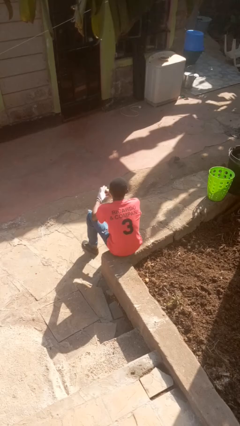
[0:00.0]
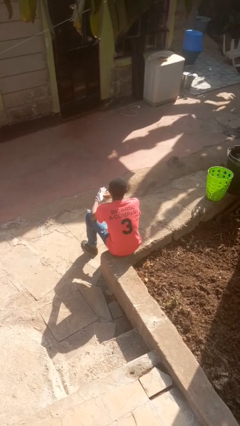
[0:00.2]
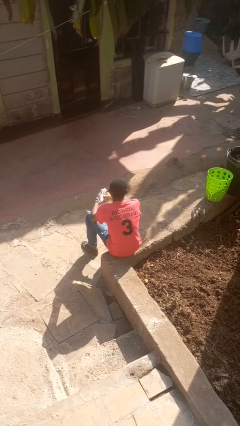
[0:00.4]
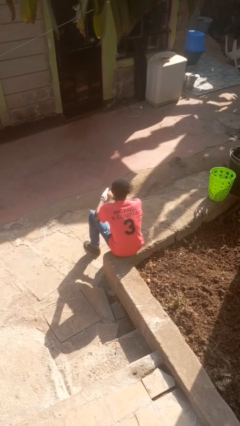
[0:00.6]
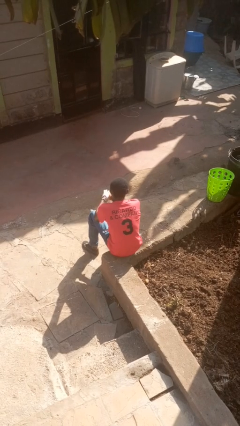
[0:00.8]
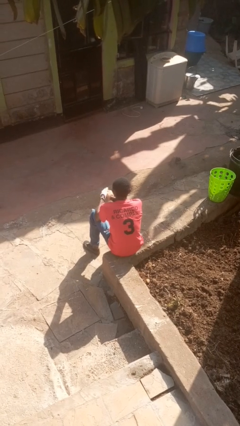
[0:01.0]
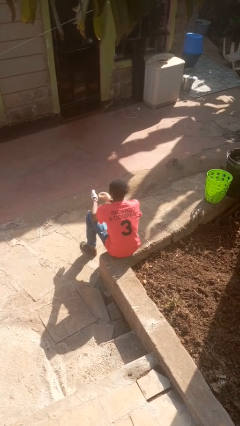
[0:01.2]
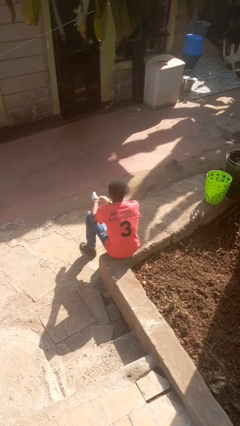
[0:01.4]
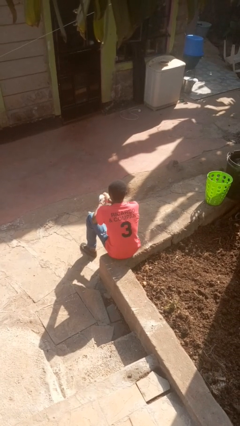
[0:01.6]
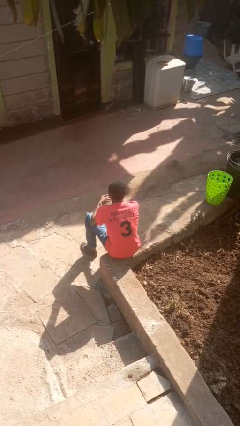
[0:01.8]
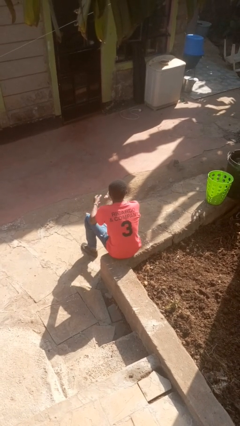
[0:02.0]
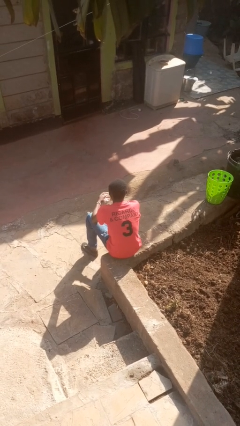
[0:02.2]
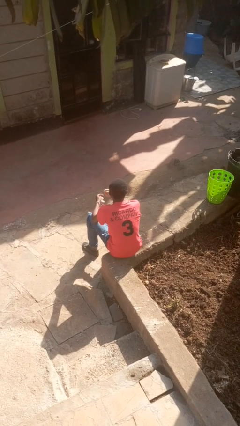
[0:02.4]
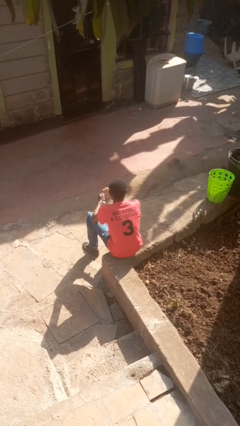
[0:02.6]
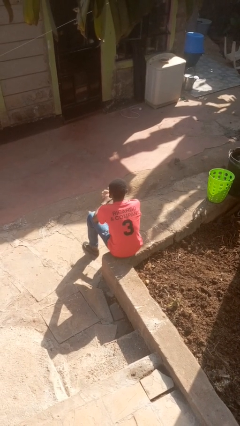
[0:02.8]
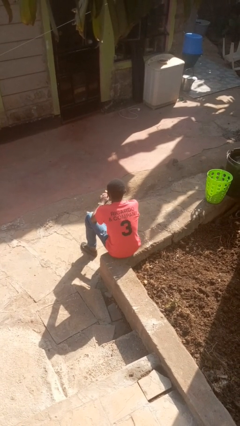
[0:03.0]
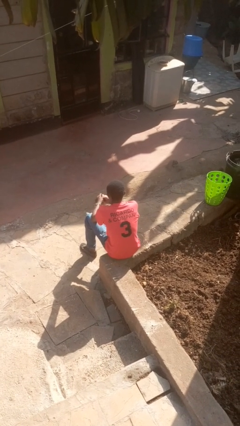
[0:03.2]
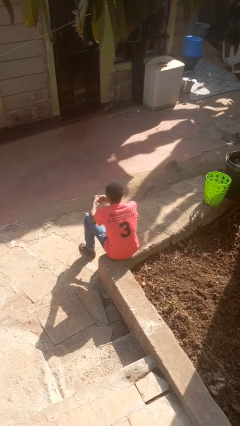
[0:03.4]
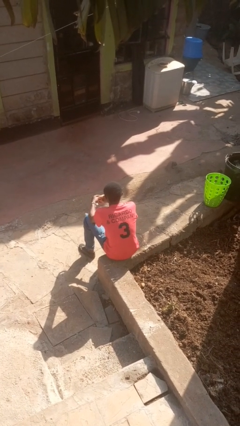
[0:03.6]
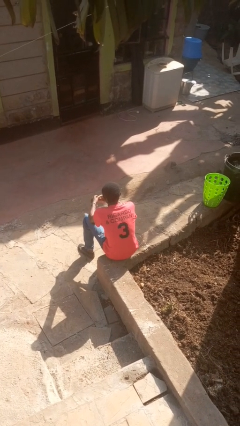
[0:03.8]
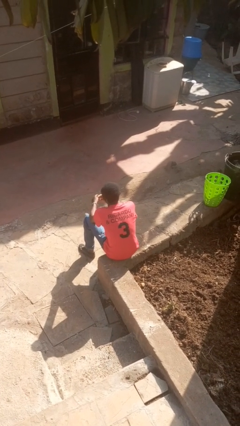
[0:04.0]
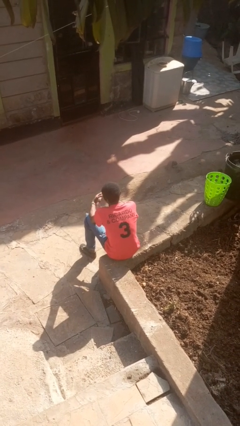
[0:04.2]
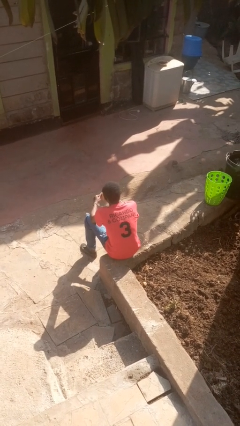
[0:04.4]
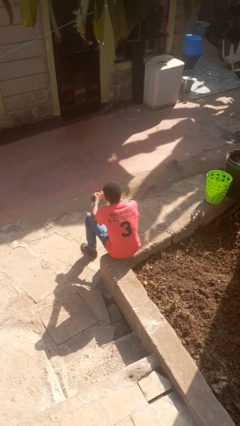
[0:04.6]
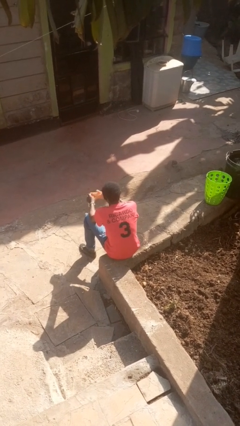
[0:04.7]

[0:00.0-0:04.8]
person takes off gloves

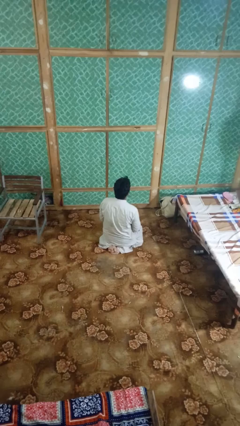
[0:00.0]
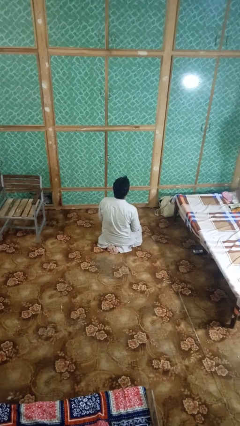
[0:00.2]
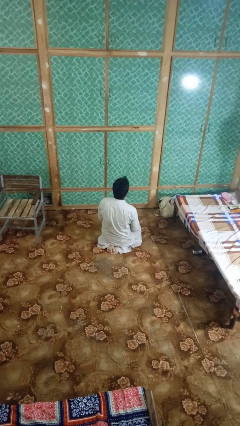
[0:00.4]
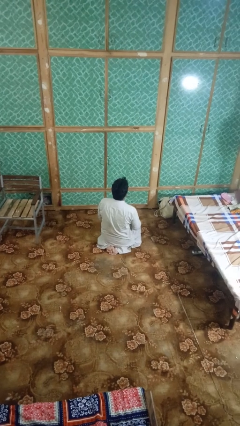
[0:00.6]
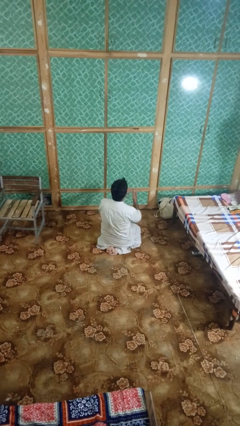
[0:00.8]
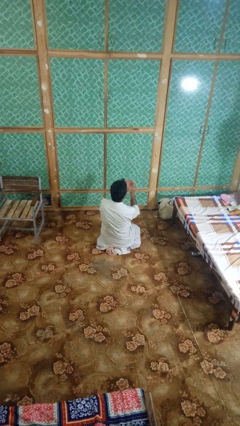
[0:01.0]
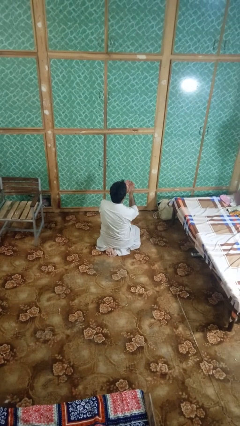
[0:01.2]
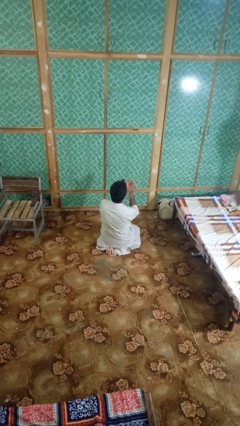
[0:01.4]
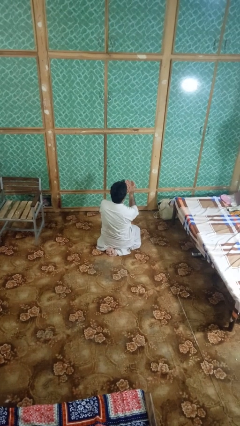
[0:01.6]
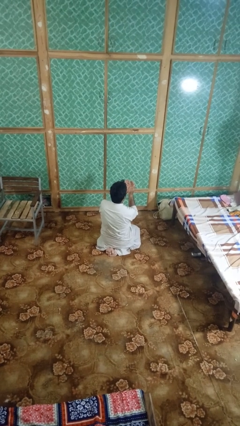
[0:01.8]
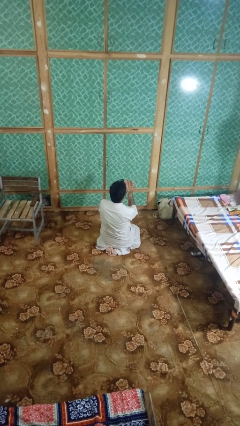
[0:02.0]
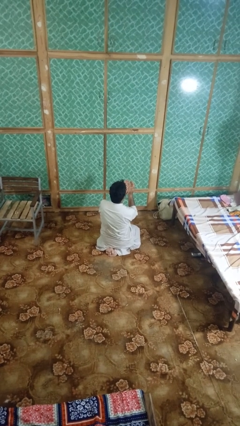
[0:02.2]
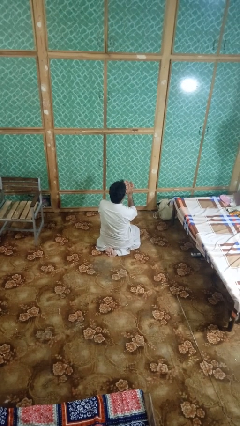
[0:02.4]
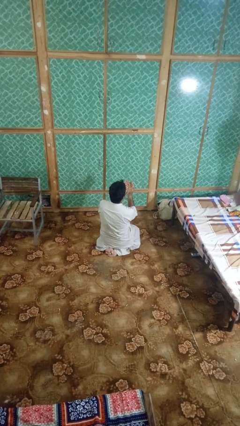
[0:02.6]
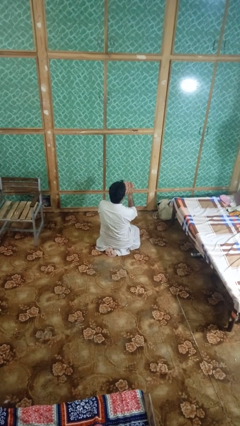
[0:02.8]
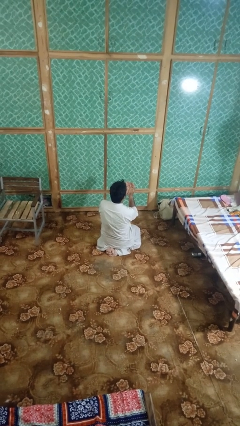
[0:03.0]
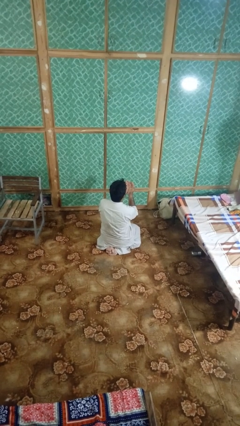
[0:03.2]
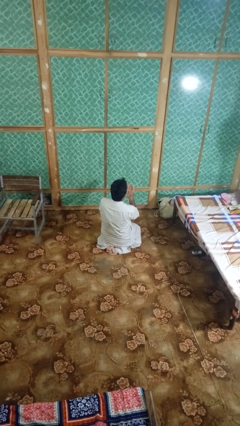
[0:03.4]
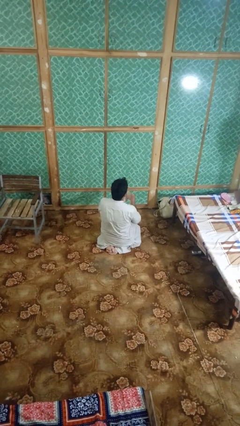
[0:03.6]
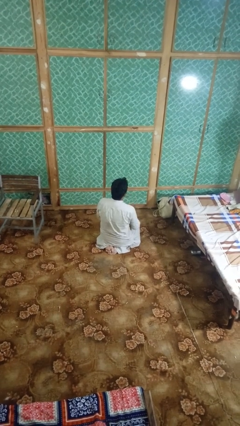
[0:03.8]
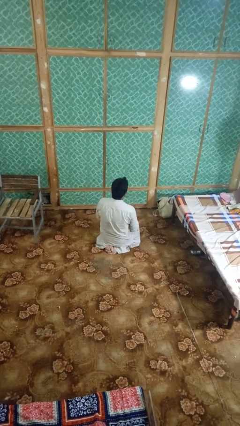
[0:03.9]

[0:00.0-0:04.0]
person prays

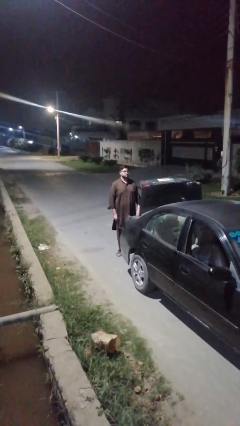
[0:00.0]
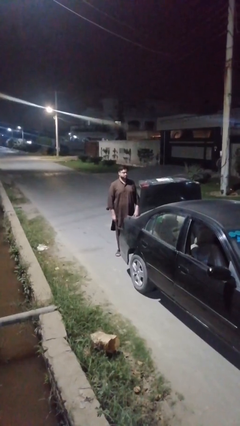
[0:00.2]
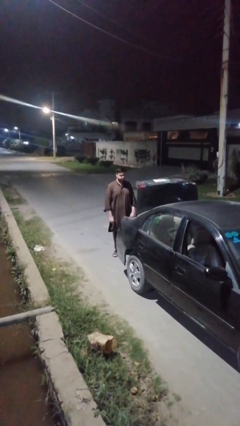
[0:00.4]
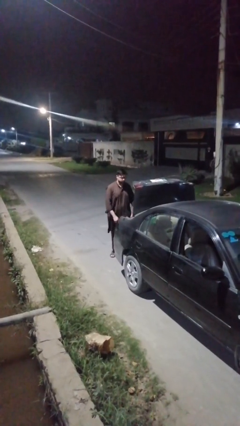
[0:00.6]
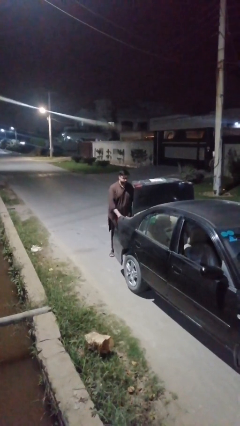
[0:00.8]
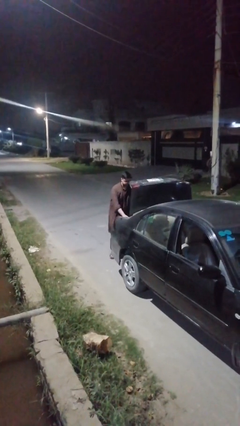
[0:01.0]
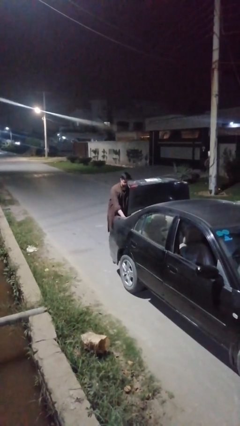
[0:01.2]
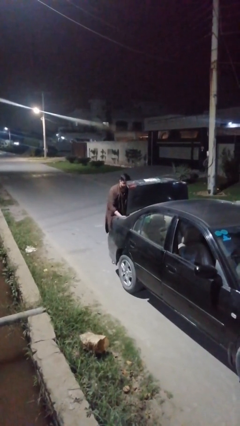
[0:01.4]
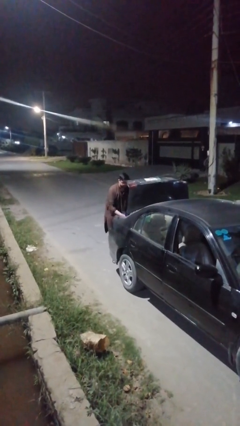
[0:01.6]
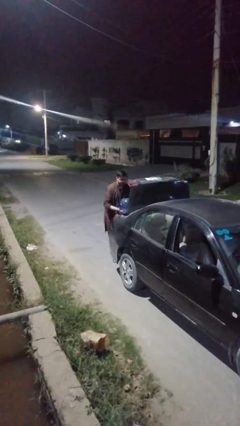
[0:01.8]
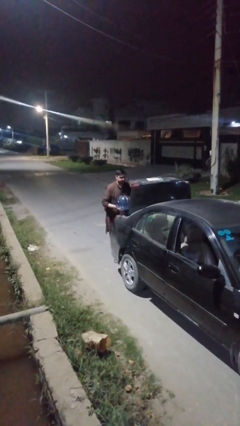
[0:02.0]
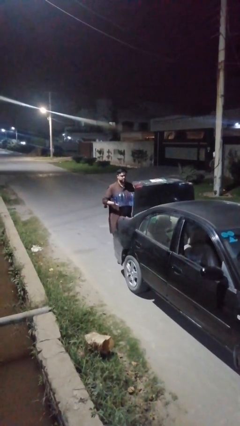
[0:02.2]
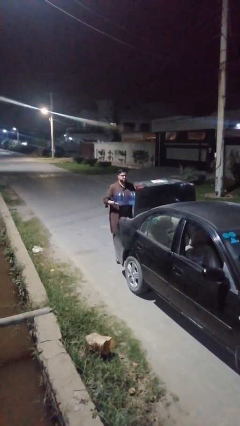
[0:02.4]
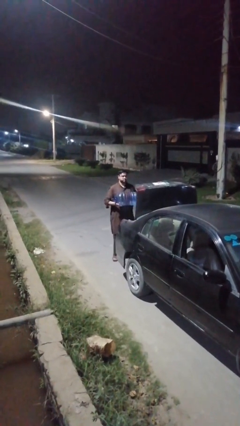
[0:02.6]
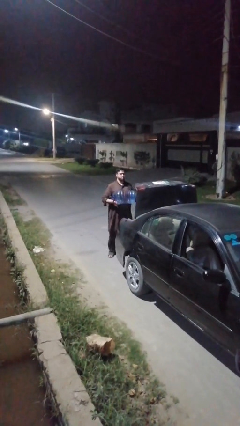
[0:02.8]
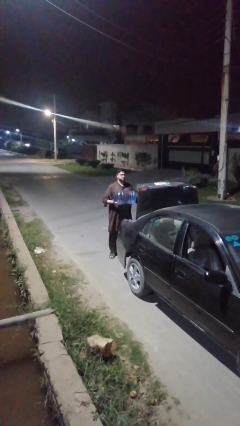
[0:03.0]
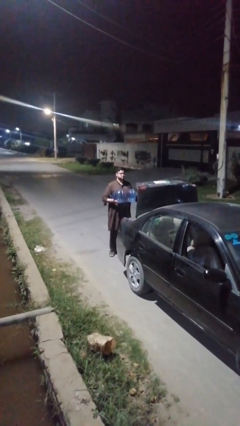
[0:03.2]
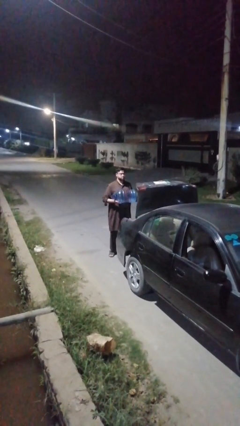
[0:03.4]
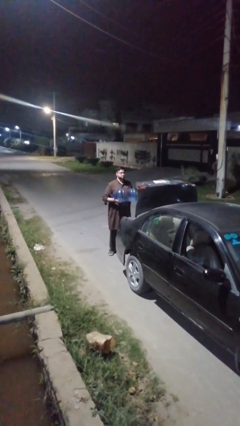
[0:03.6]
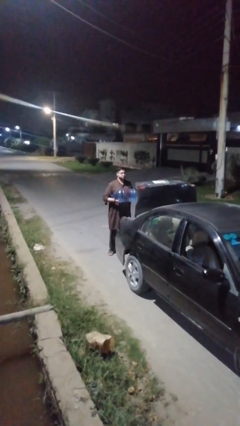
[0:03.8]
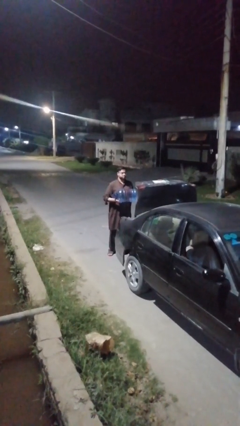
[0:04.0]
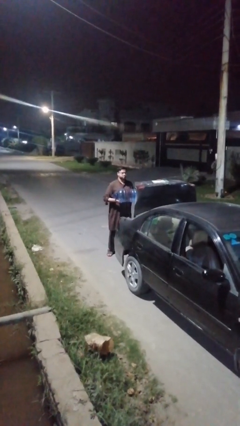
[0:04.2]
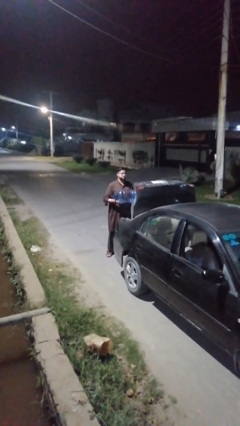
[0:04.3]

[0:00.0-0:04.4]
person unloads car

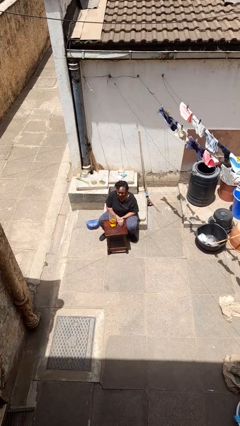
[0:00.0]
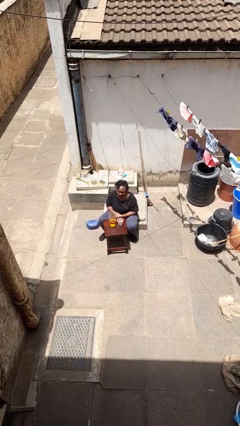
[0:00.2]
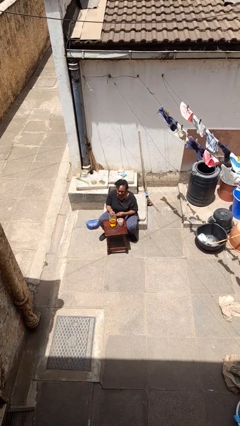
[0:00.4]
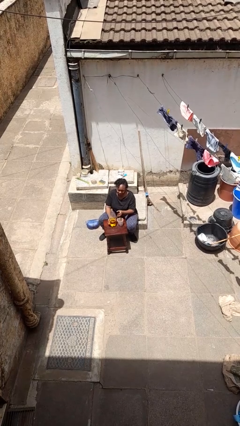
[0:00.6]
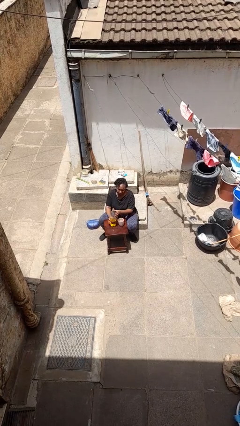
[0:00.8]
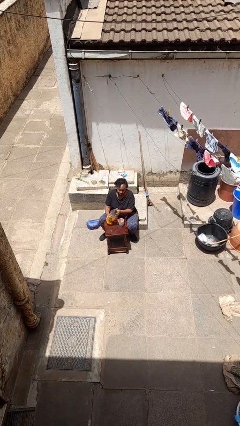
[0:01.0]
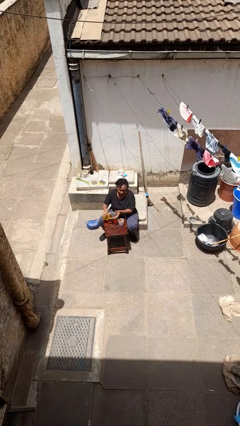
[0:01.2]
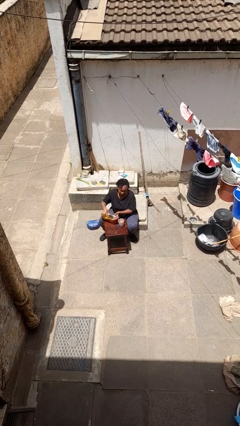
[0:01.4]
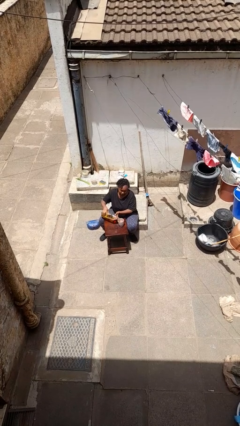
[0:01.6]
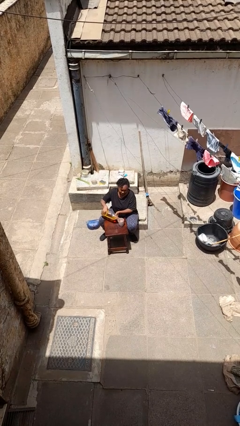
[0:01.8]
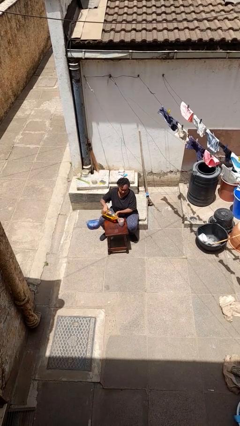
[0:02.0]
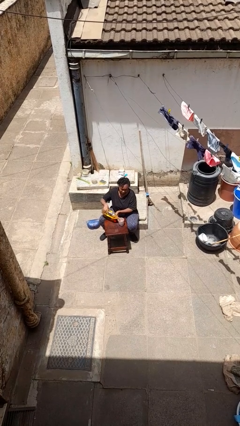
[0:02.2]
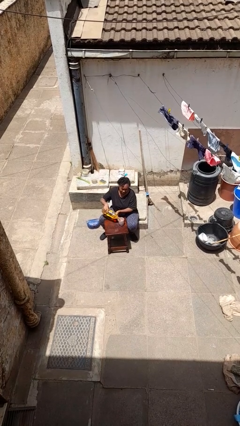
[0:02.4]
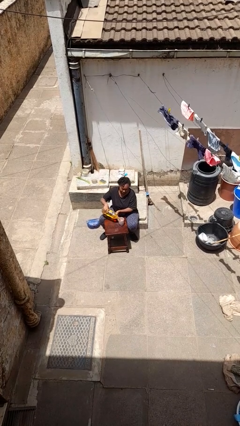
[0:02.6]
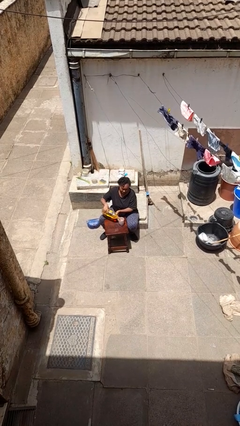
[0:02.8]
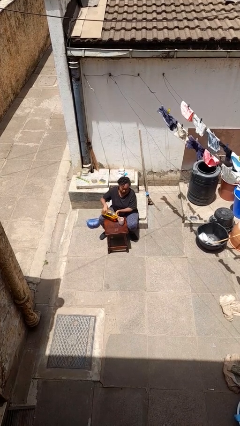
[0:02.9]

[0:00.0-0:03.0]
person pours liquid into cup

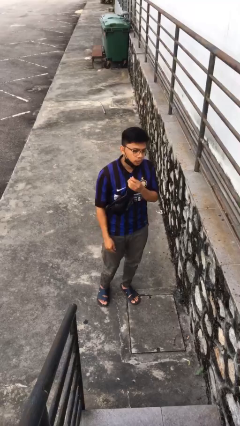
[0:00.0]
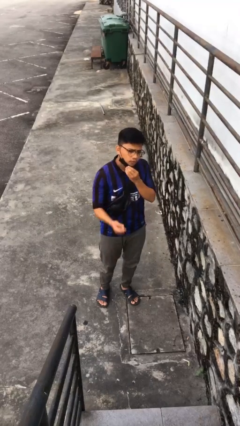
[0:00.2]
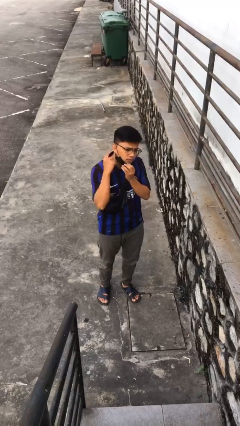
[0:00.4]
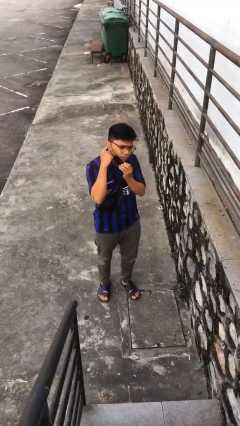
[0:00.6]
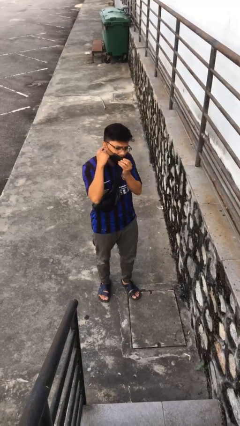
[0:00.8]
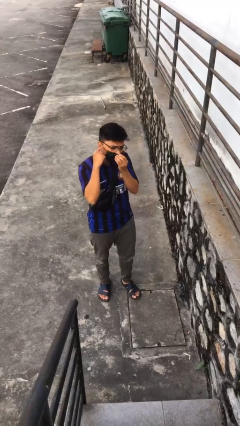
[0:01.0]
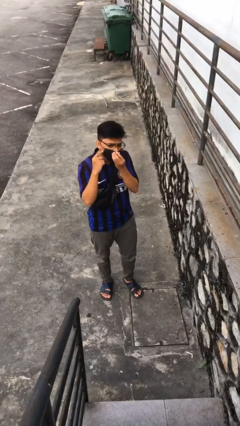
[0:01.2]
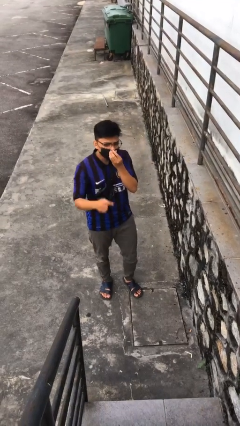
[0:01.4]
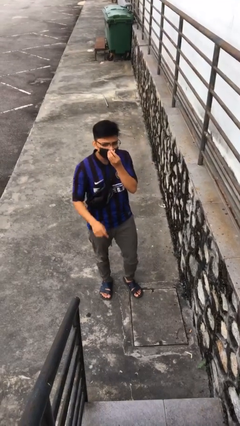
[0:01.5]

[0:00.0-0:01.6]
person gestures listen closely
